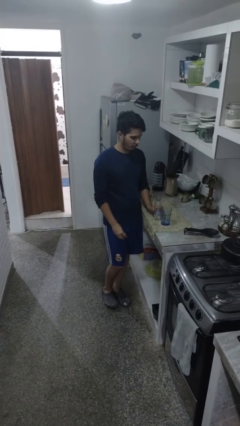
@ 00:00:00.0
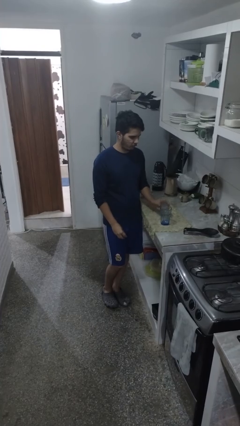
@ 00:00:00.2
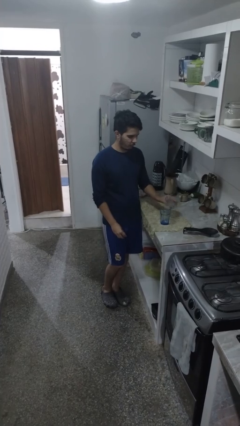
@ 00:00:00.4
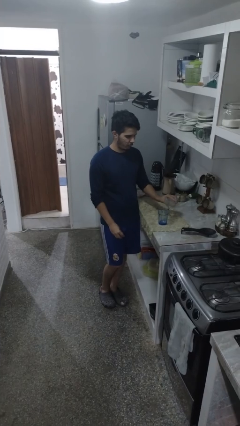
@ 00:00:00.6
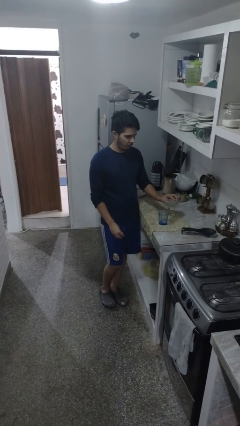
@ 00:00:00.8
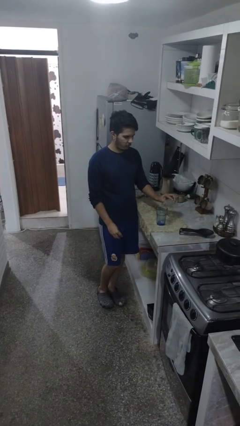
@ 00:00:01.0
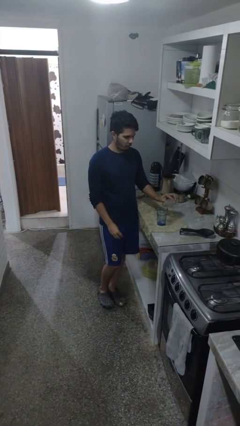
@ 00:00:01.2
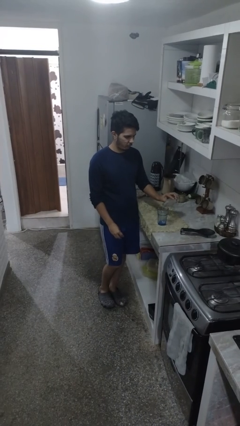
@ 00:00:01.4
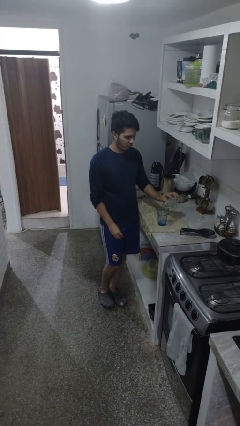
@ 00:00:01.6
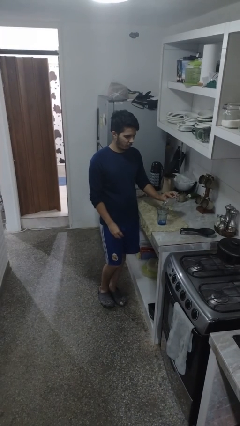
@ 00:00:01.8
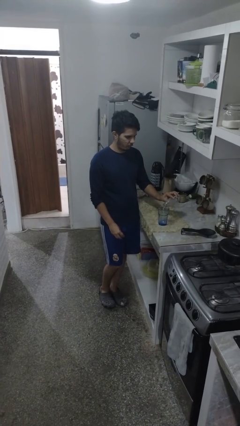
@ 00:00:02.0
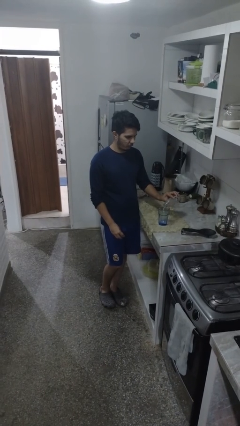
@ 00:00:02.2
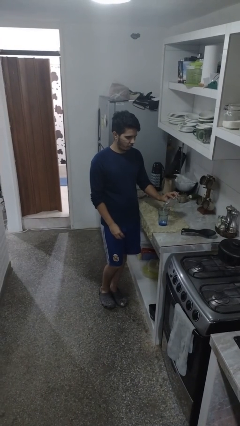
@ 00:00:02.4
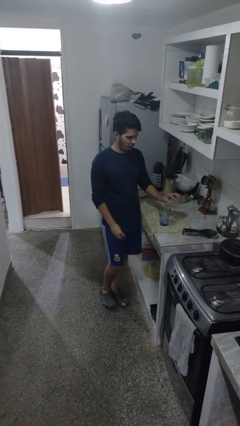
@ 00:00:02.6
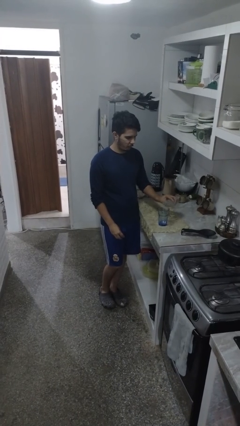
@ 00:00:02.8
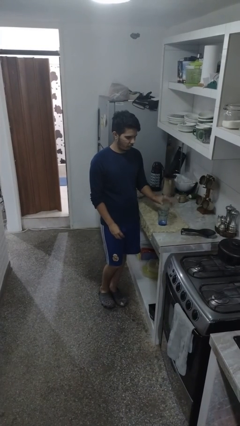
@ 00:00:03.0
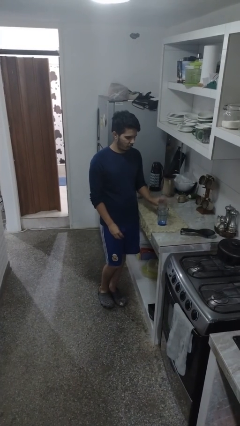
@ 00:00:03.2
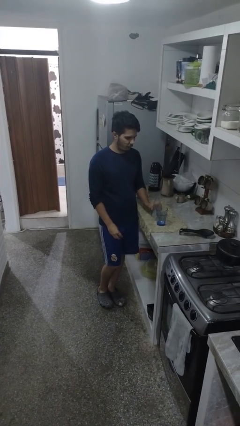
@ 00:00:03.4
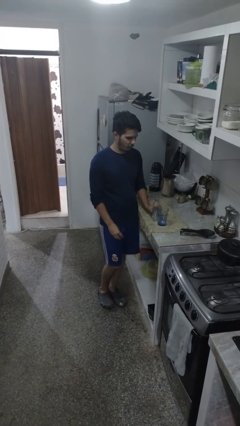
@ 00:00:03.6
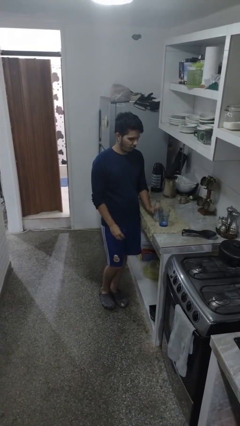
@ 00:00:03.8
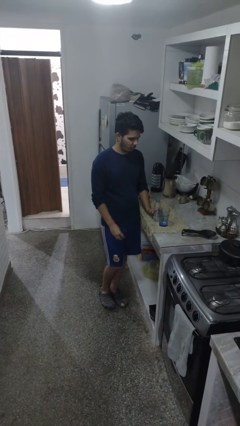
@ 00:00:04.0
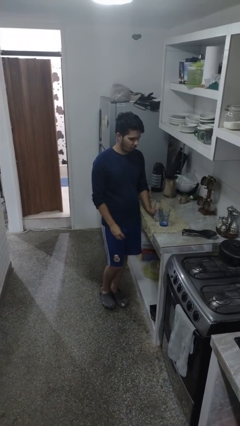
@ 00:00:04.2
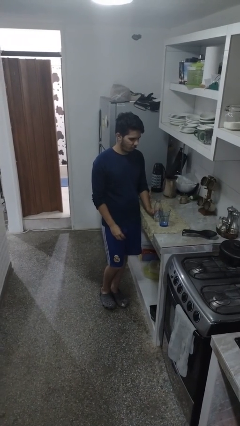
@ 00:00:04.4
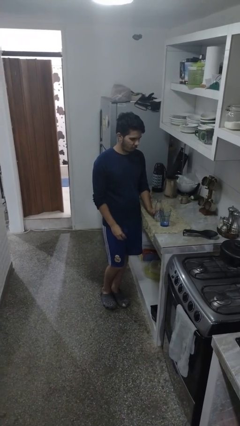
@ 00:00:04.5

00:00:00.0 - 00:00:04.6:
person pours liquid into cup

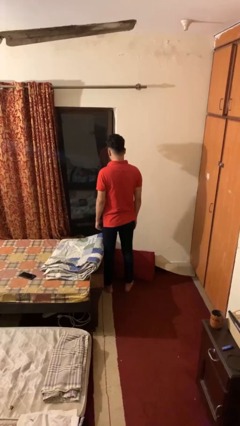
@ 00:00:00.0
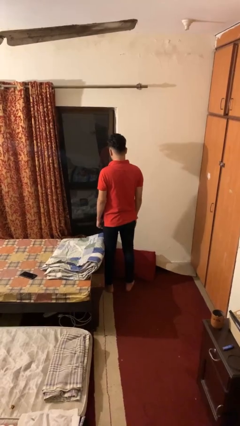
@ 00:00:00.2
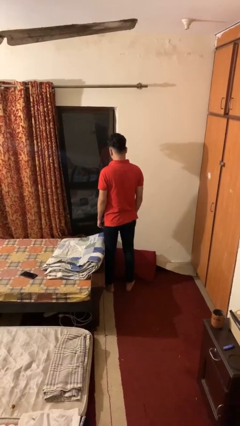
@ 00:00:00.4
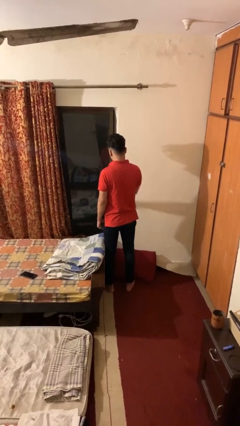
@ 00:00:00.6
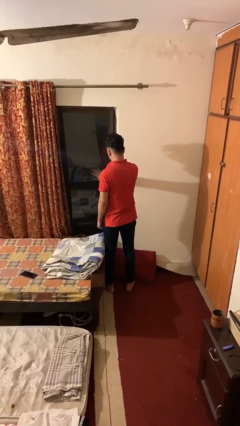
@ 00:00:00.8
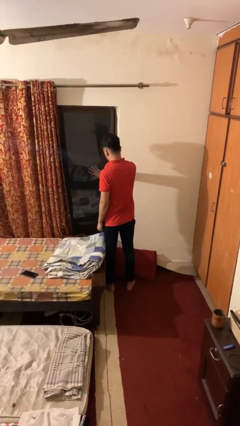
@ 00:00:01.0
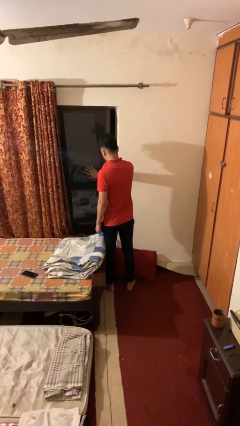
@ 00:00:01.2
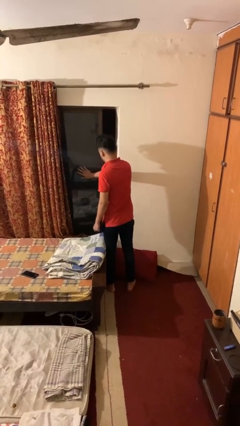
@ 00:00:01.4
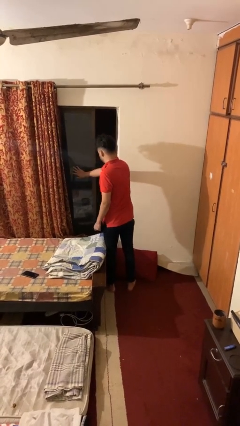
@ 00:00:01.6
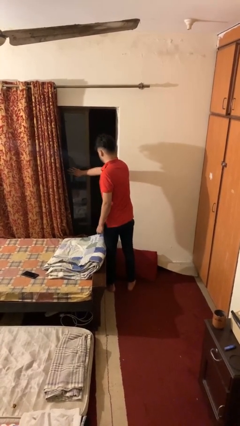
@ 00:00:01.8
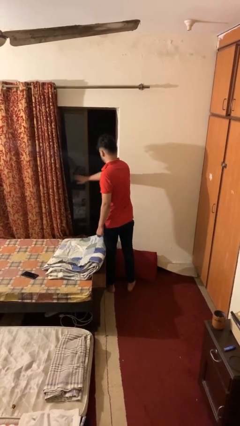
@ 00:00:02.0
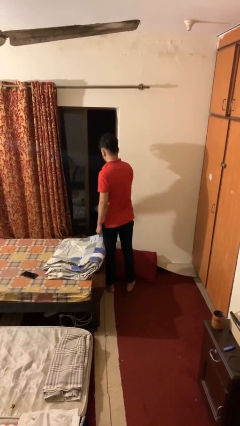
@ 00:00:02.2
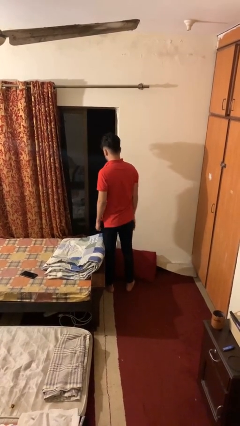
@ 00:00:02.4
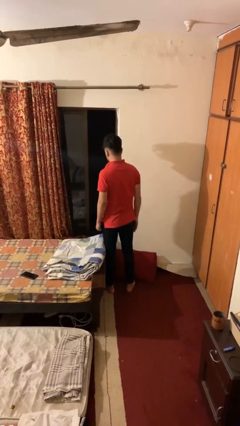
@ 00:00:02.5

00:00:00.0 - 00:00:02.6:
person opens home window

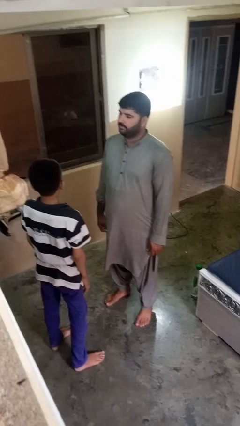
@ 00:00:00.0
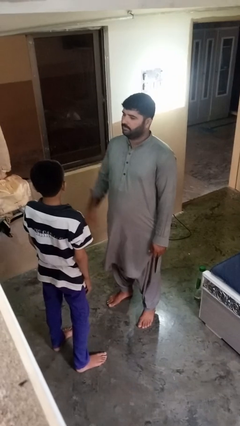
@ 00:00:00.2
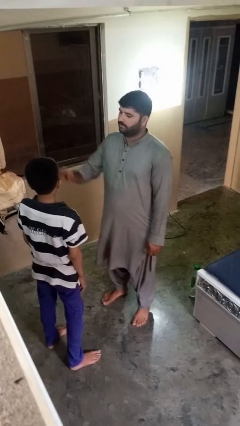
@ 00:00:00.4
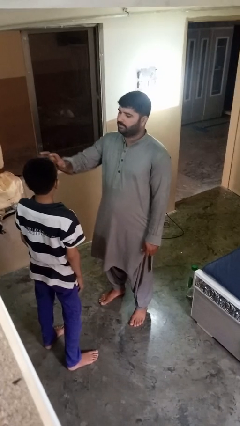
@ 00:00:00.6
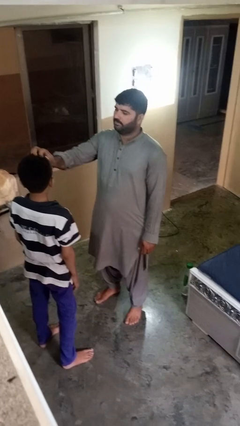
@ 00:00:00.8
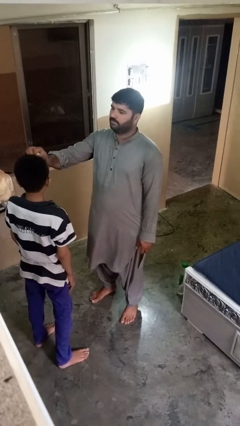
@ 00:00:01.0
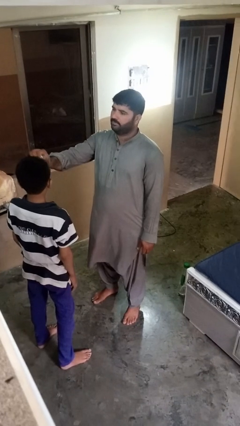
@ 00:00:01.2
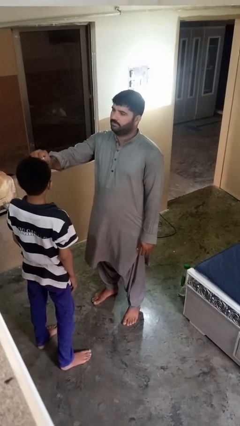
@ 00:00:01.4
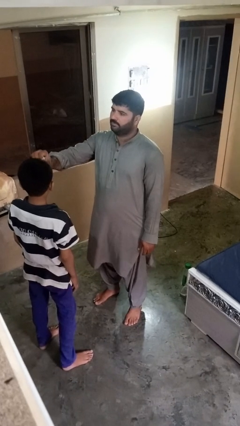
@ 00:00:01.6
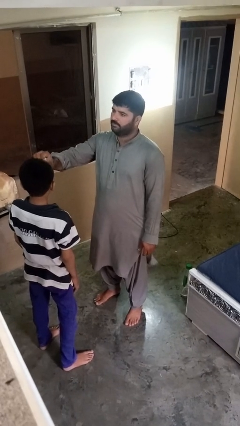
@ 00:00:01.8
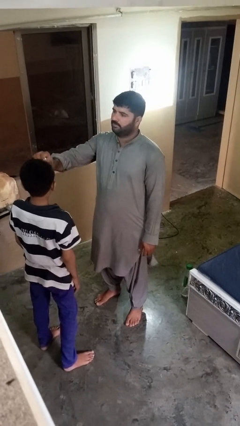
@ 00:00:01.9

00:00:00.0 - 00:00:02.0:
person braids hair of person

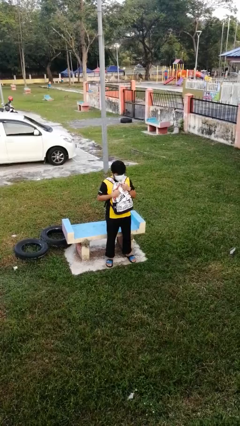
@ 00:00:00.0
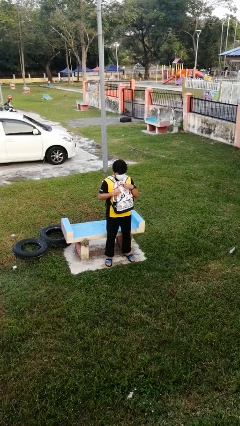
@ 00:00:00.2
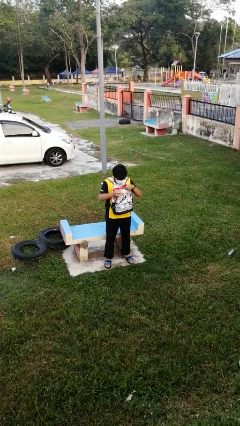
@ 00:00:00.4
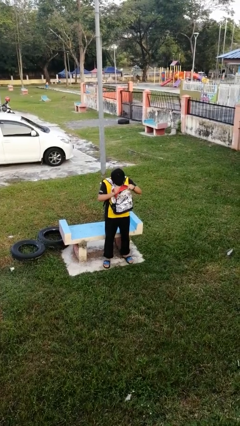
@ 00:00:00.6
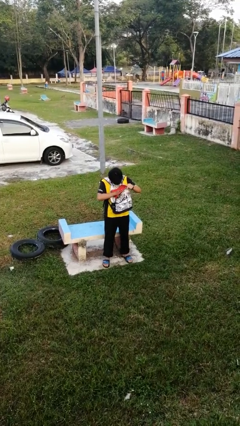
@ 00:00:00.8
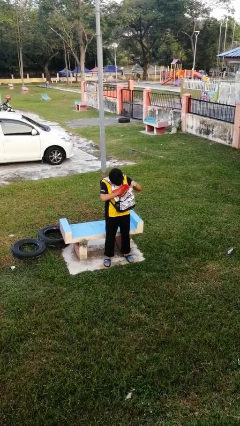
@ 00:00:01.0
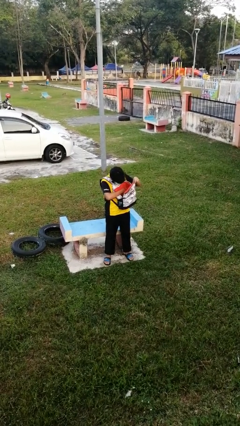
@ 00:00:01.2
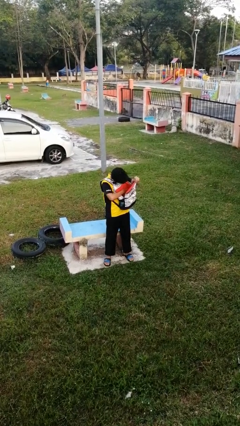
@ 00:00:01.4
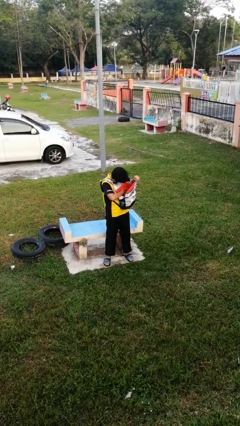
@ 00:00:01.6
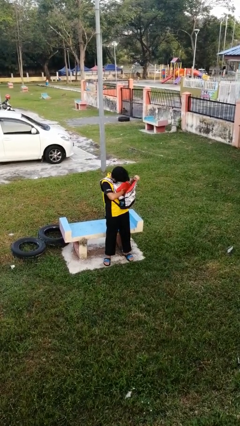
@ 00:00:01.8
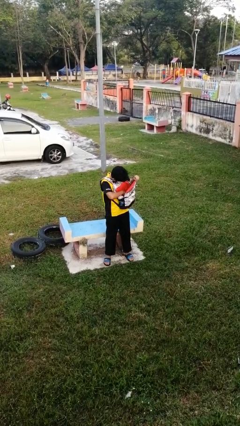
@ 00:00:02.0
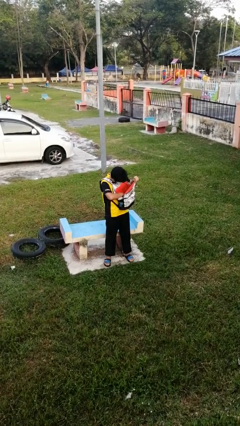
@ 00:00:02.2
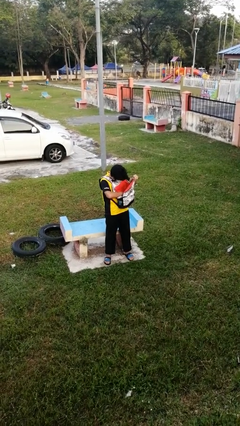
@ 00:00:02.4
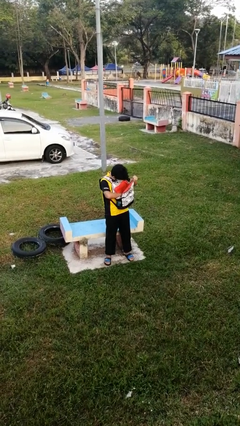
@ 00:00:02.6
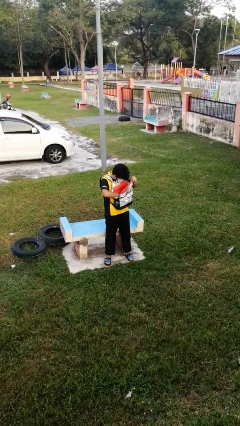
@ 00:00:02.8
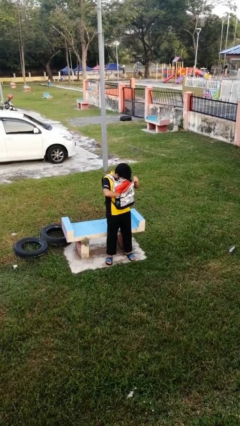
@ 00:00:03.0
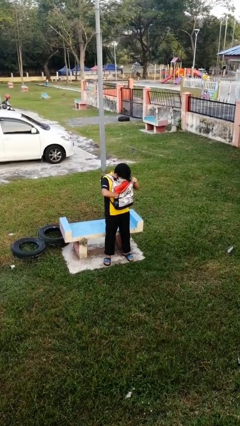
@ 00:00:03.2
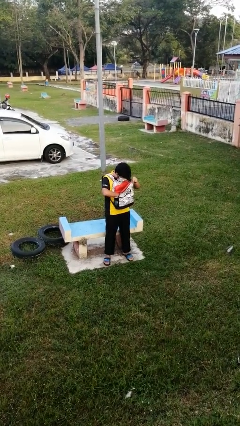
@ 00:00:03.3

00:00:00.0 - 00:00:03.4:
person searches in backpack

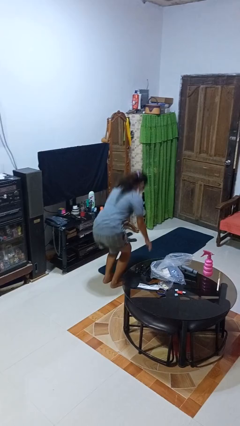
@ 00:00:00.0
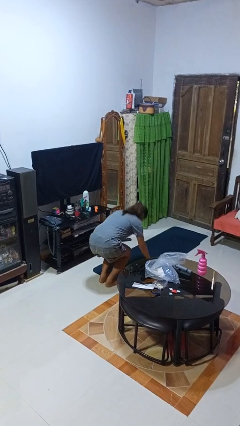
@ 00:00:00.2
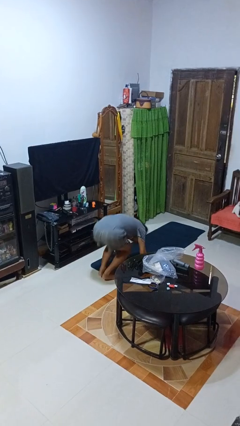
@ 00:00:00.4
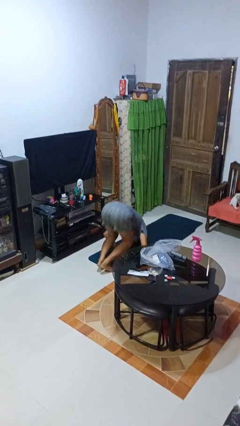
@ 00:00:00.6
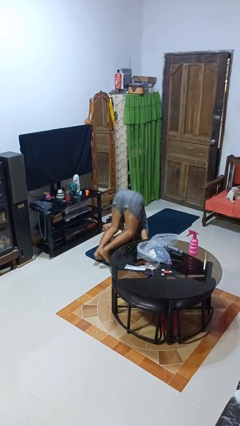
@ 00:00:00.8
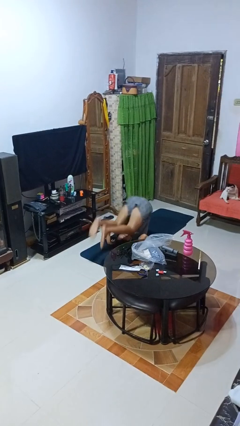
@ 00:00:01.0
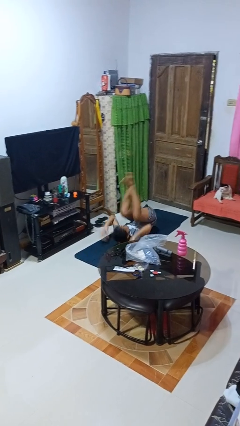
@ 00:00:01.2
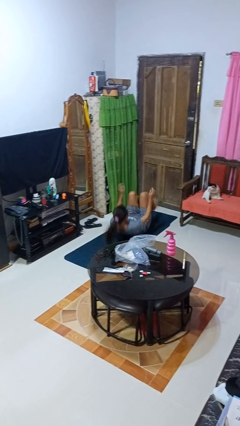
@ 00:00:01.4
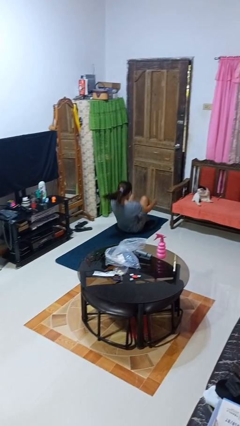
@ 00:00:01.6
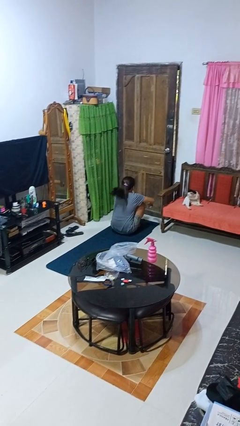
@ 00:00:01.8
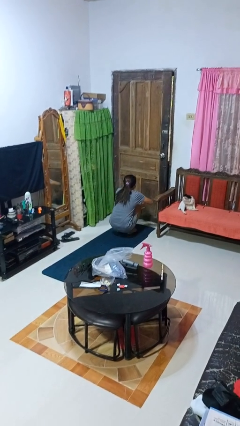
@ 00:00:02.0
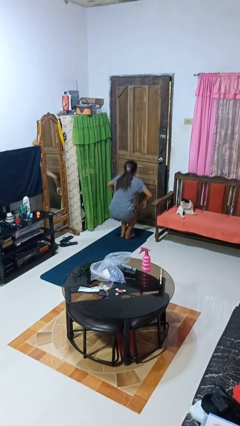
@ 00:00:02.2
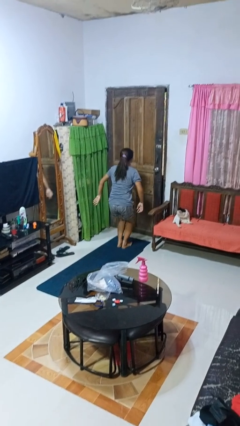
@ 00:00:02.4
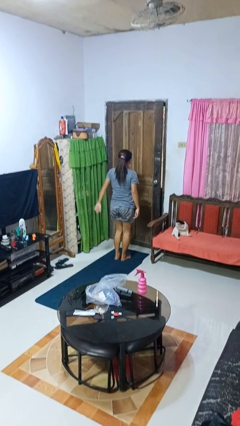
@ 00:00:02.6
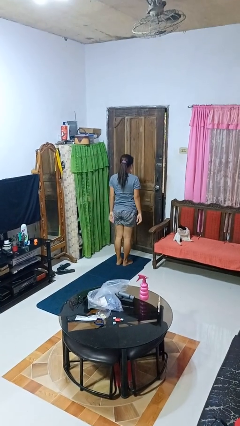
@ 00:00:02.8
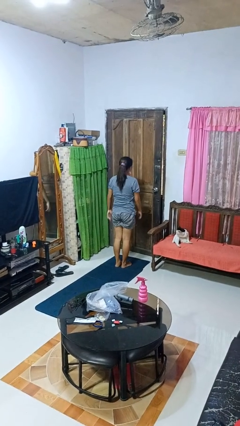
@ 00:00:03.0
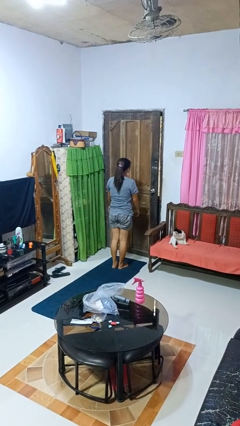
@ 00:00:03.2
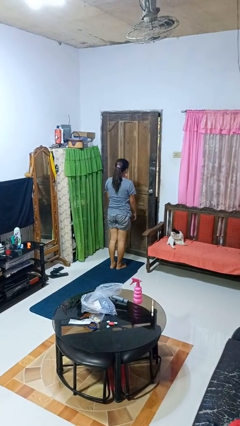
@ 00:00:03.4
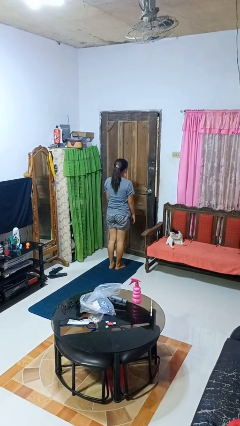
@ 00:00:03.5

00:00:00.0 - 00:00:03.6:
person somersaults

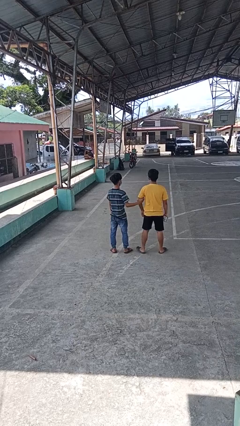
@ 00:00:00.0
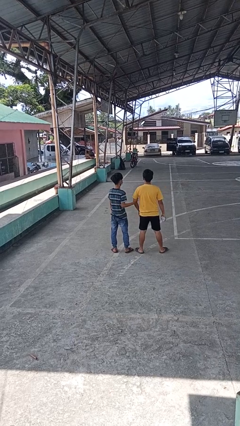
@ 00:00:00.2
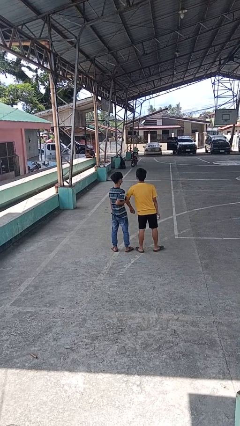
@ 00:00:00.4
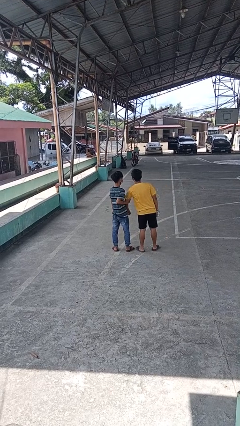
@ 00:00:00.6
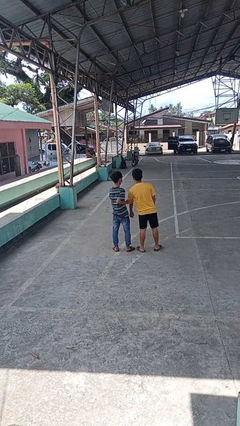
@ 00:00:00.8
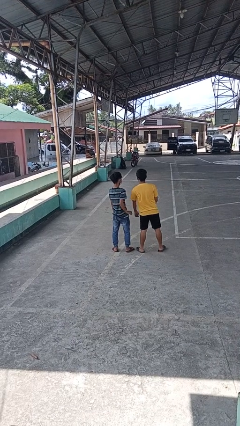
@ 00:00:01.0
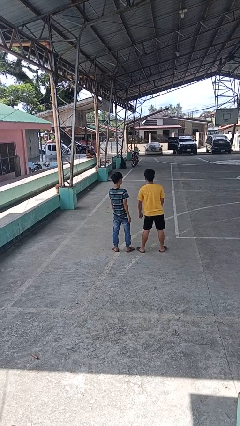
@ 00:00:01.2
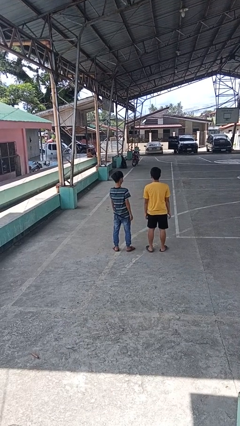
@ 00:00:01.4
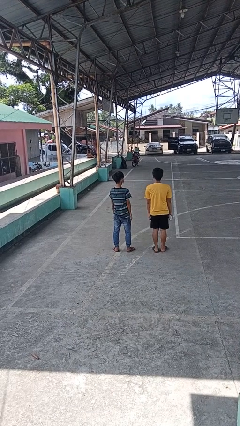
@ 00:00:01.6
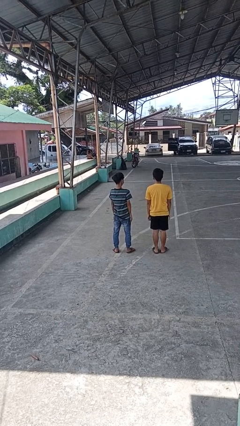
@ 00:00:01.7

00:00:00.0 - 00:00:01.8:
person grabs person by bicep
